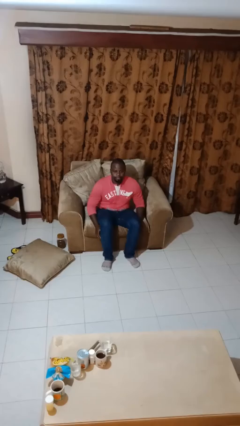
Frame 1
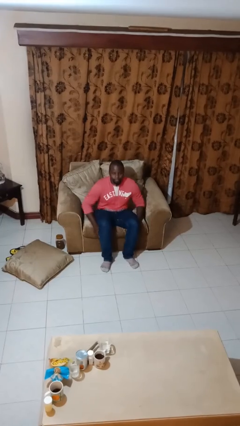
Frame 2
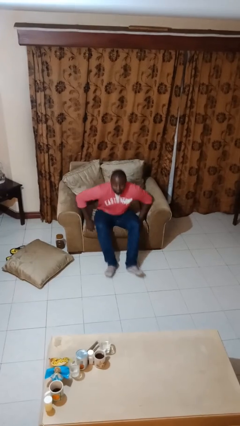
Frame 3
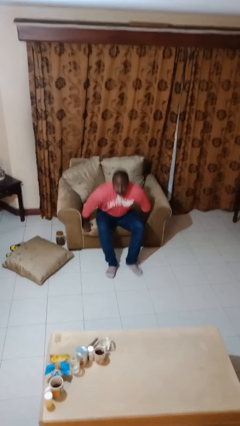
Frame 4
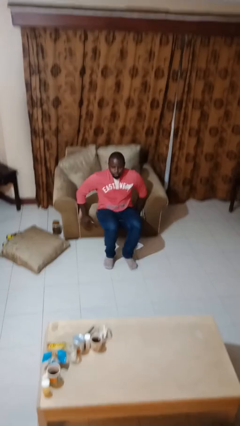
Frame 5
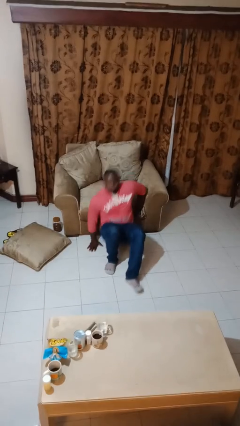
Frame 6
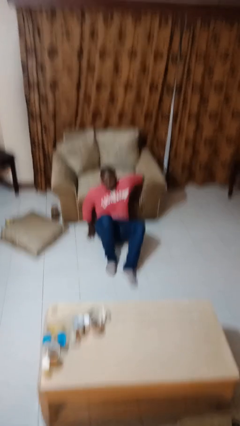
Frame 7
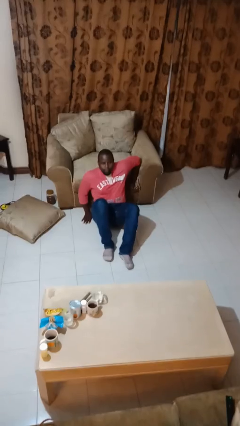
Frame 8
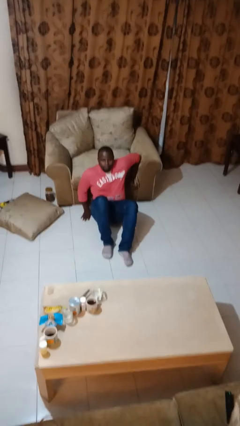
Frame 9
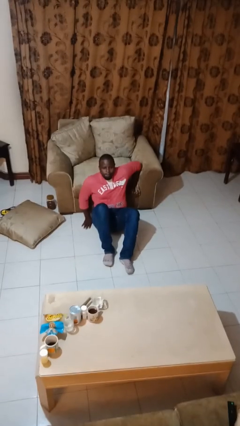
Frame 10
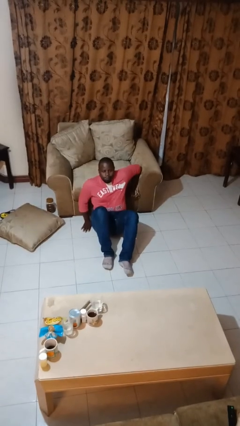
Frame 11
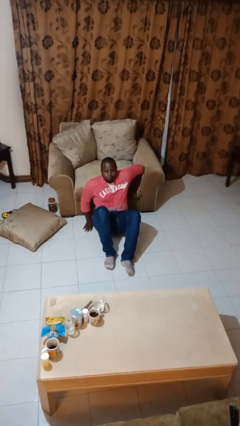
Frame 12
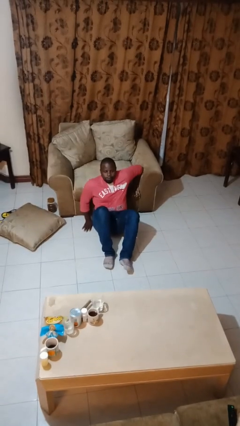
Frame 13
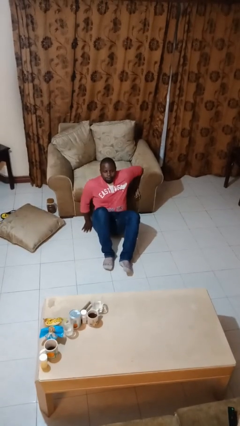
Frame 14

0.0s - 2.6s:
person falls from chair

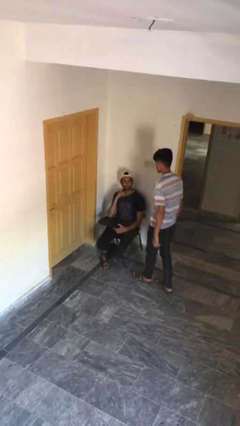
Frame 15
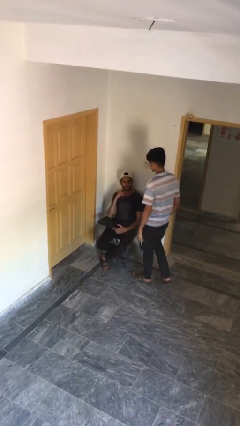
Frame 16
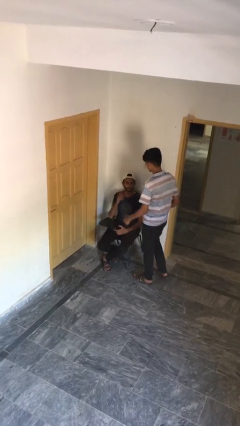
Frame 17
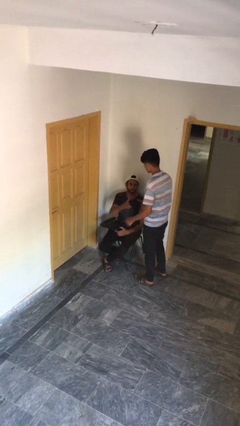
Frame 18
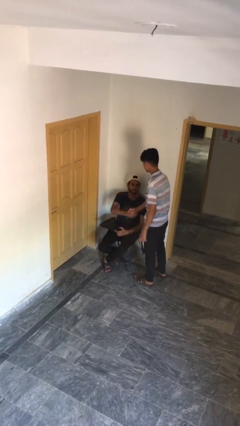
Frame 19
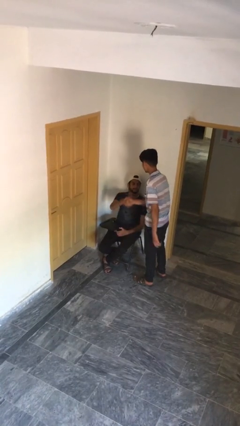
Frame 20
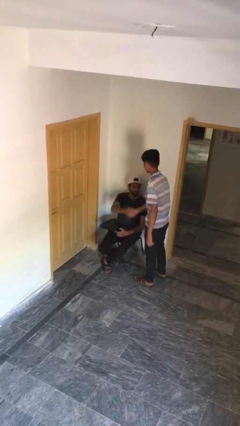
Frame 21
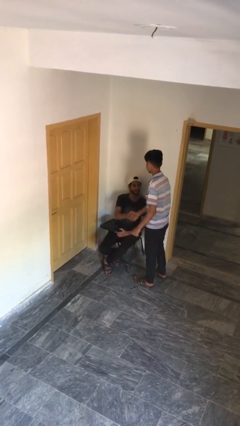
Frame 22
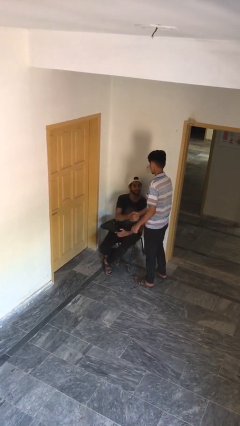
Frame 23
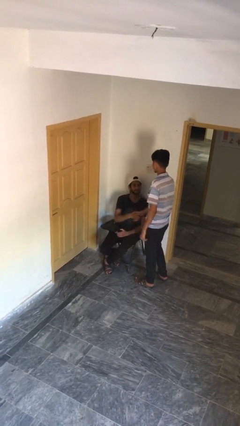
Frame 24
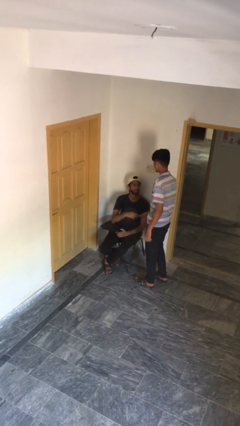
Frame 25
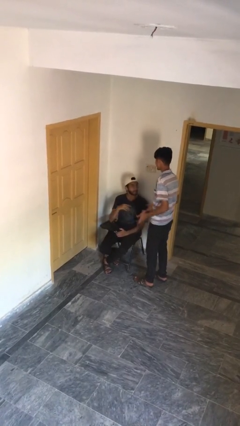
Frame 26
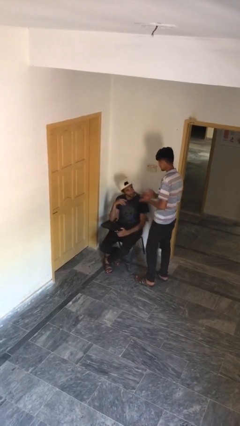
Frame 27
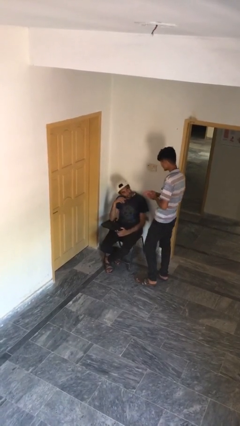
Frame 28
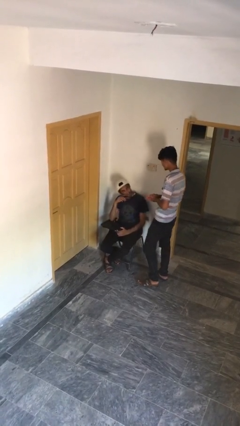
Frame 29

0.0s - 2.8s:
person shakes hand

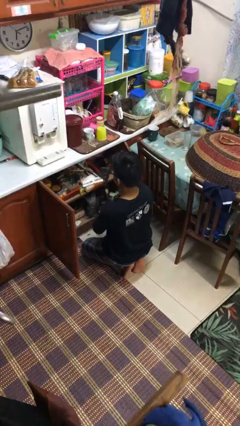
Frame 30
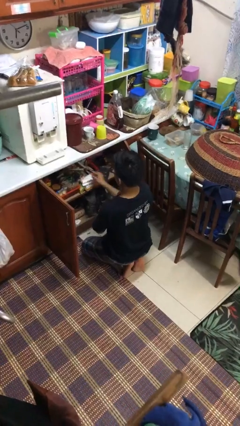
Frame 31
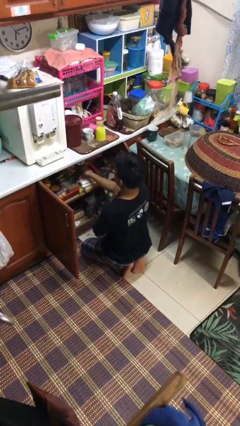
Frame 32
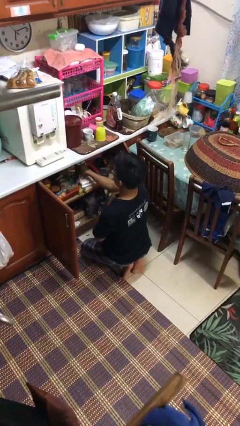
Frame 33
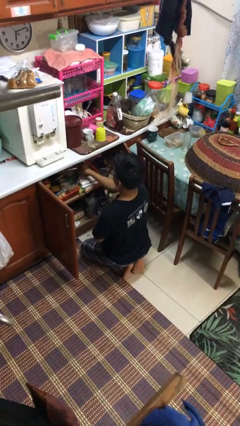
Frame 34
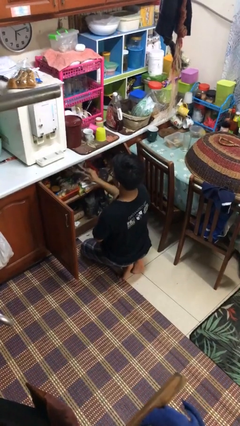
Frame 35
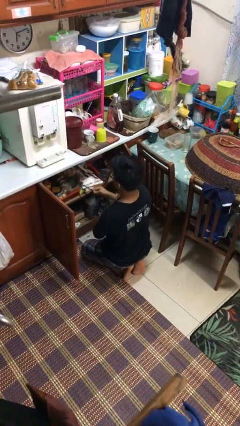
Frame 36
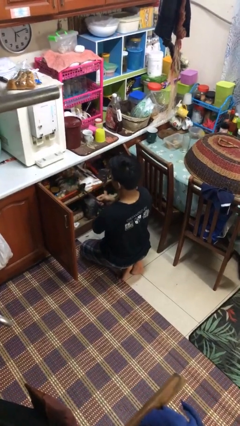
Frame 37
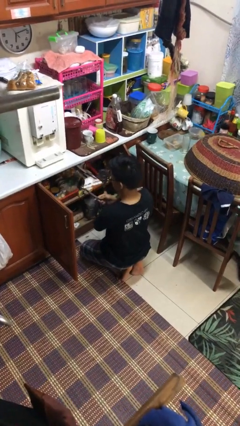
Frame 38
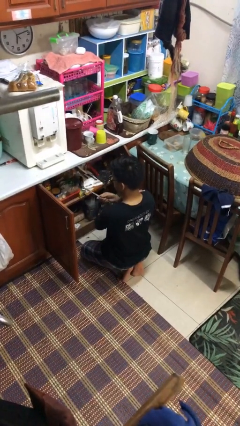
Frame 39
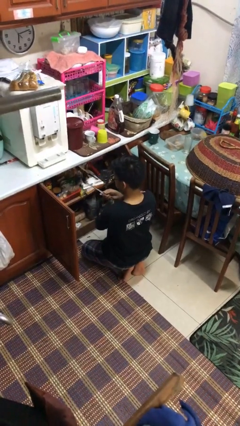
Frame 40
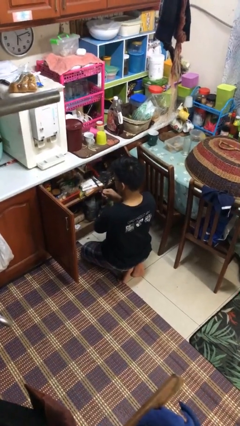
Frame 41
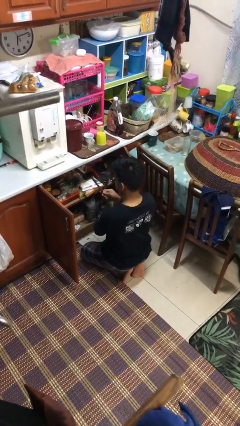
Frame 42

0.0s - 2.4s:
person takes object from kitchen drawer

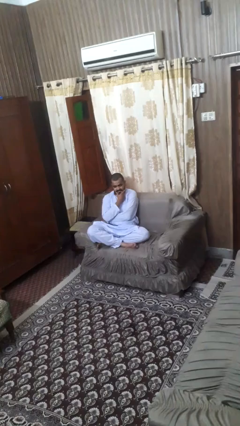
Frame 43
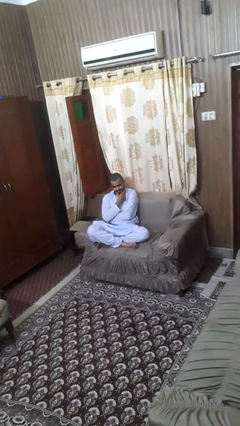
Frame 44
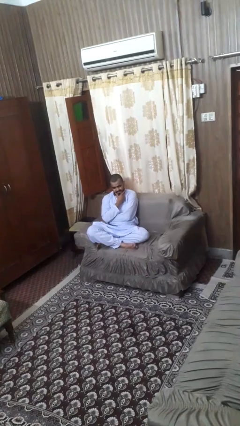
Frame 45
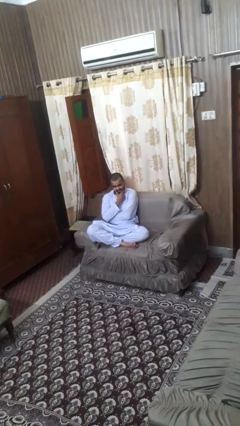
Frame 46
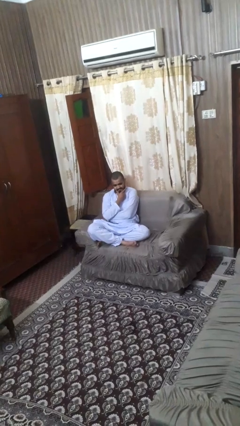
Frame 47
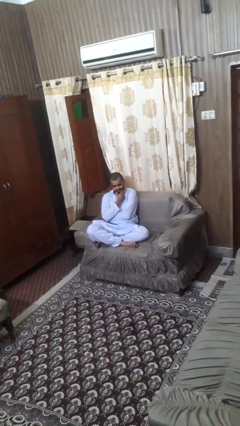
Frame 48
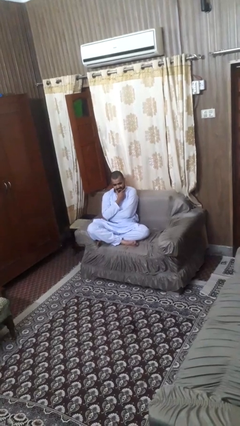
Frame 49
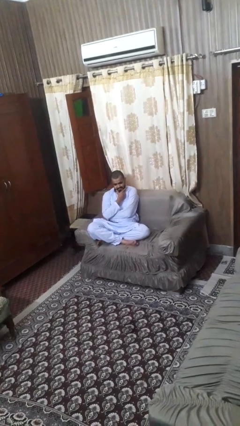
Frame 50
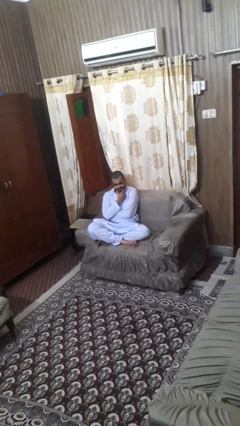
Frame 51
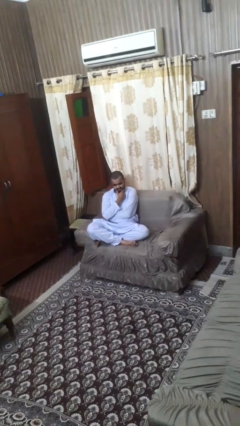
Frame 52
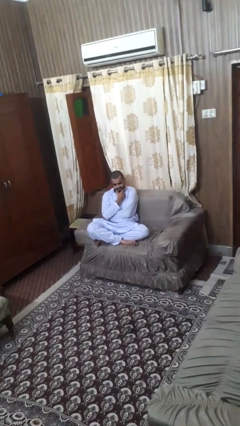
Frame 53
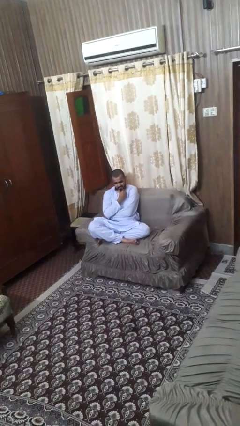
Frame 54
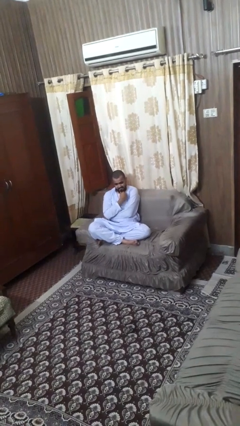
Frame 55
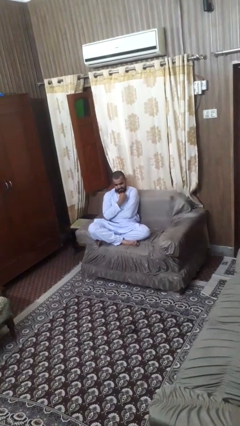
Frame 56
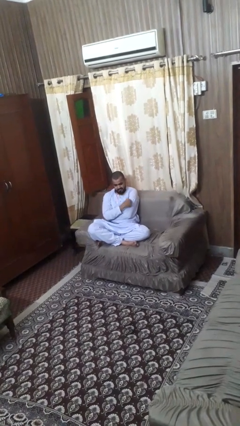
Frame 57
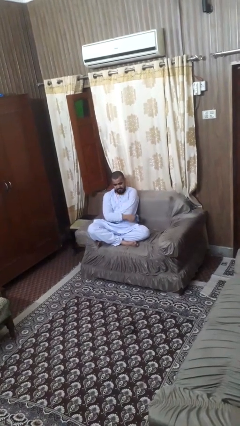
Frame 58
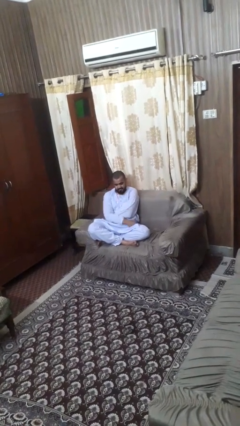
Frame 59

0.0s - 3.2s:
person strokes chin

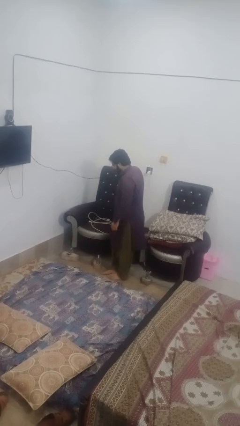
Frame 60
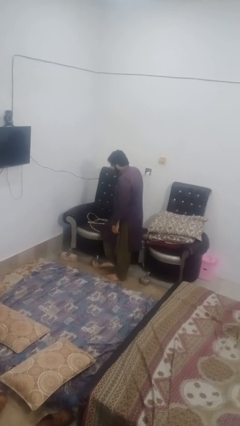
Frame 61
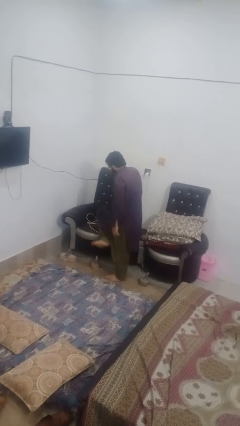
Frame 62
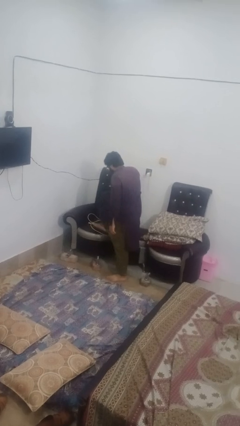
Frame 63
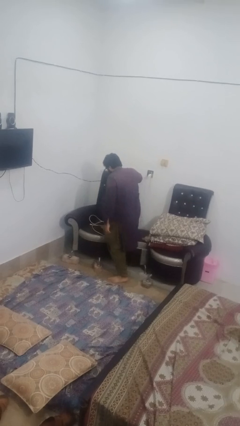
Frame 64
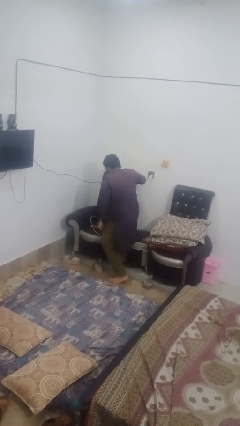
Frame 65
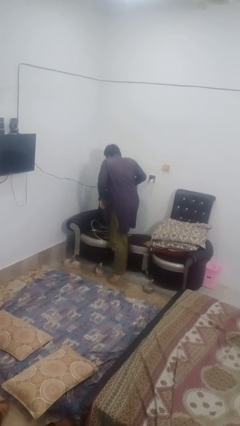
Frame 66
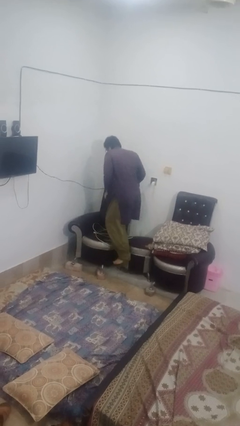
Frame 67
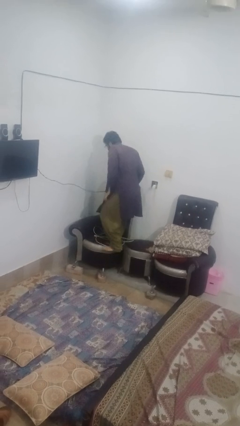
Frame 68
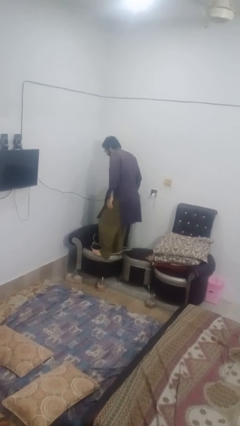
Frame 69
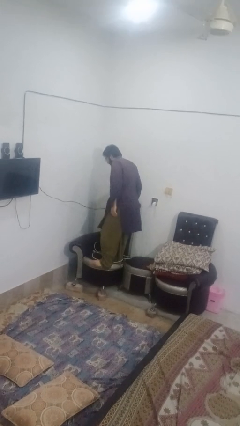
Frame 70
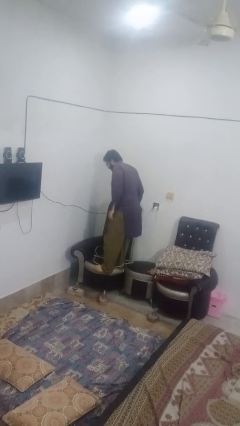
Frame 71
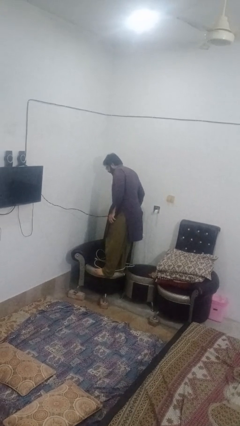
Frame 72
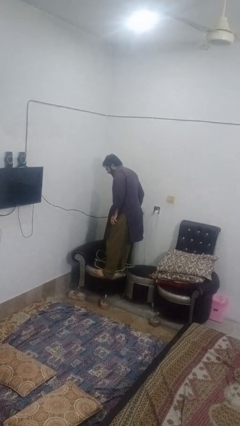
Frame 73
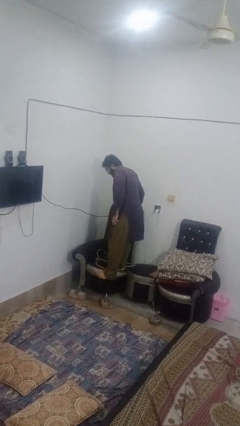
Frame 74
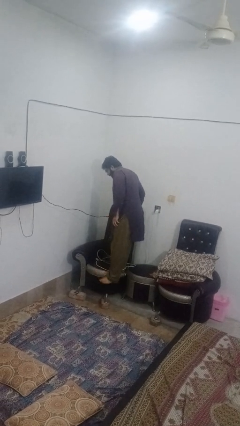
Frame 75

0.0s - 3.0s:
person climbs on couch

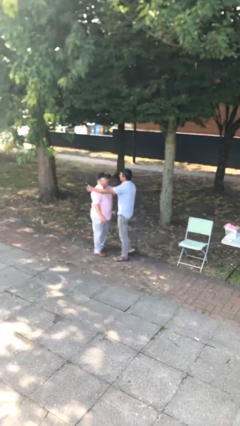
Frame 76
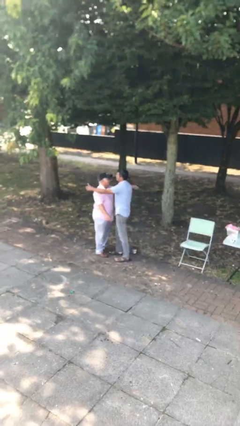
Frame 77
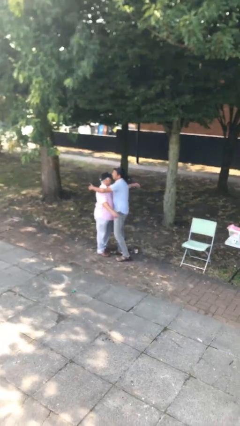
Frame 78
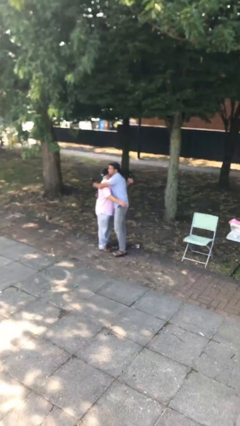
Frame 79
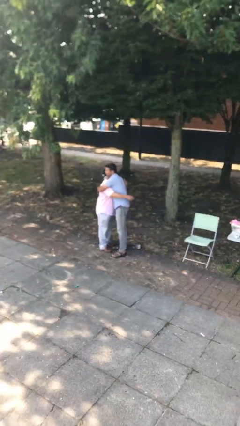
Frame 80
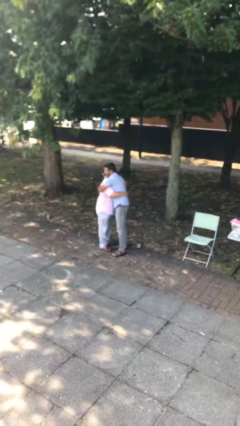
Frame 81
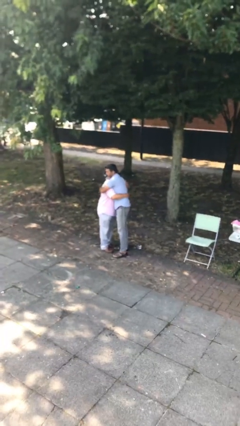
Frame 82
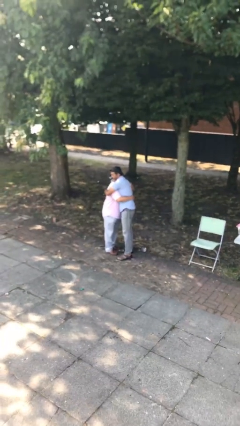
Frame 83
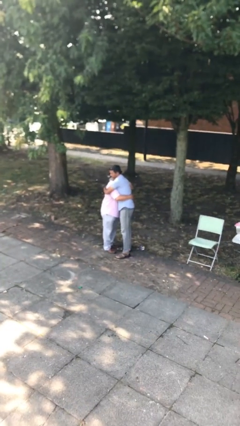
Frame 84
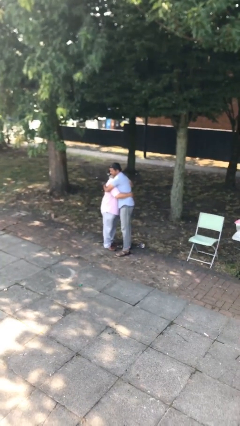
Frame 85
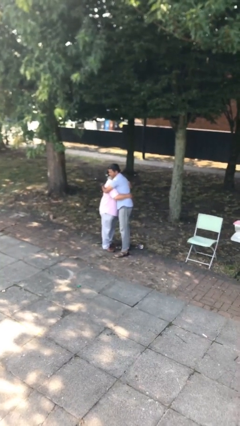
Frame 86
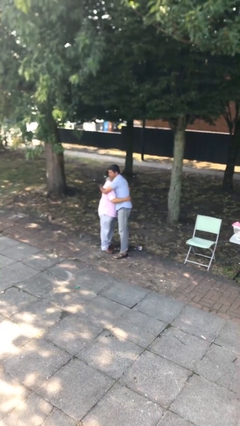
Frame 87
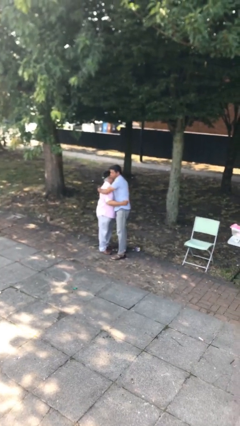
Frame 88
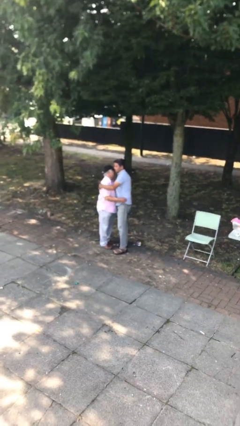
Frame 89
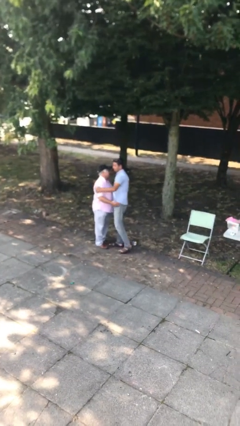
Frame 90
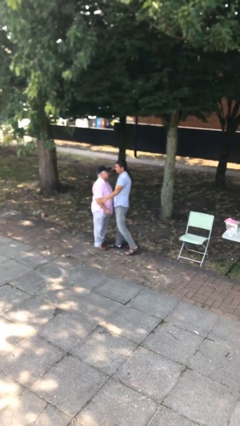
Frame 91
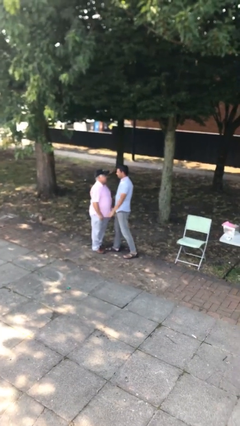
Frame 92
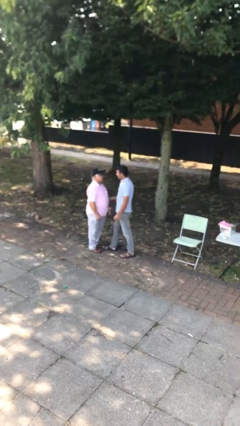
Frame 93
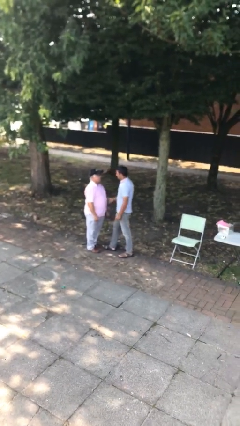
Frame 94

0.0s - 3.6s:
person embraces person

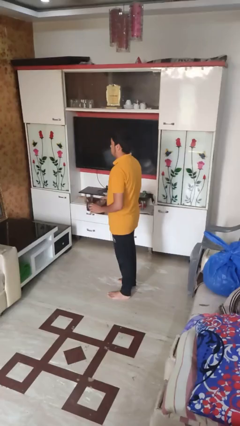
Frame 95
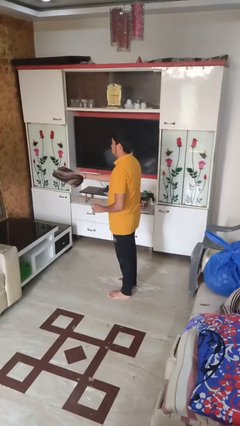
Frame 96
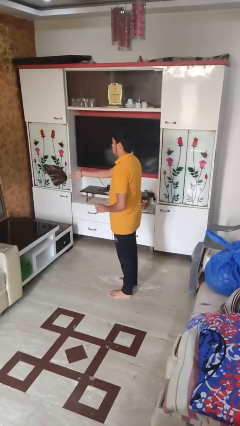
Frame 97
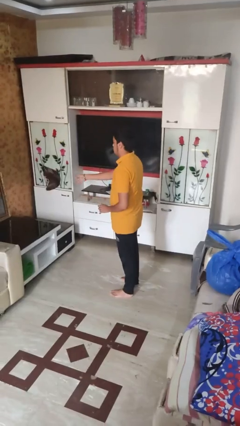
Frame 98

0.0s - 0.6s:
person throws object on table
